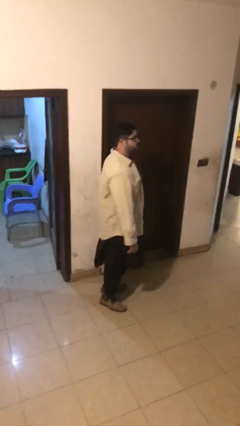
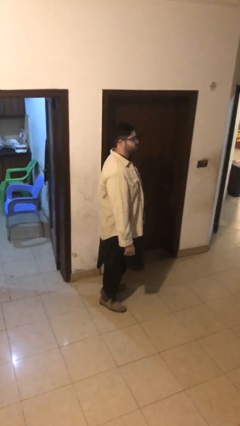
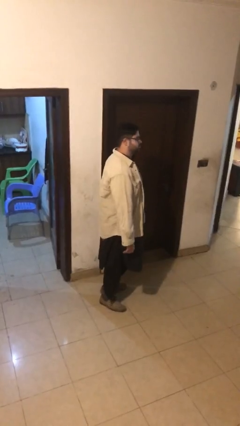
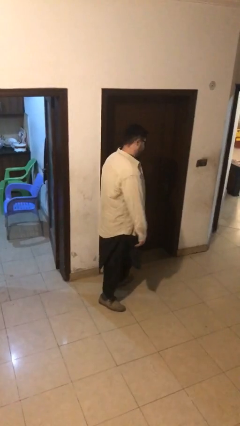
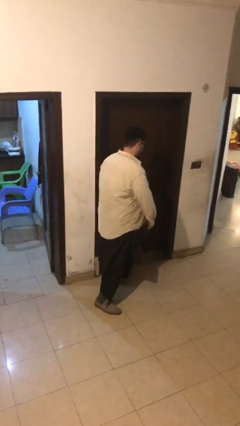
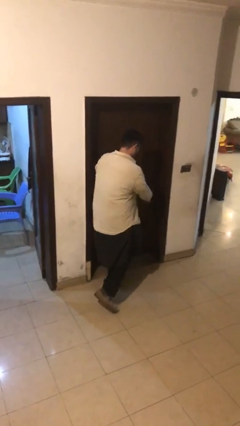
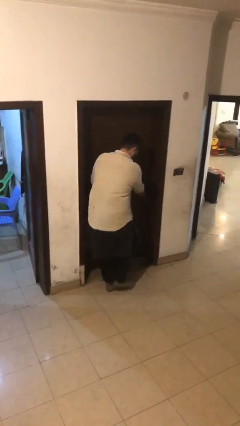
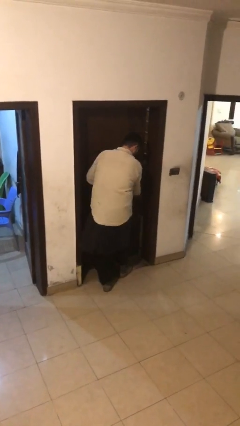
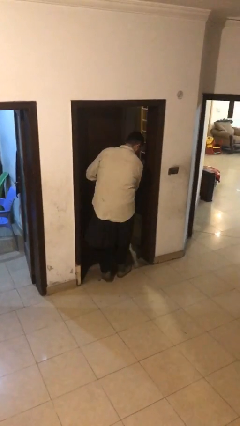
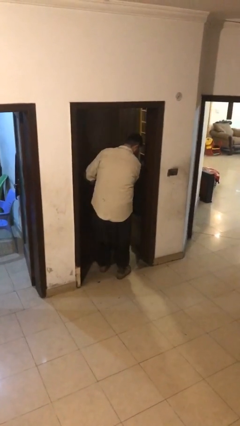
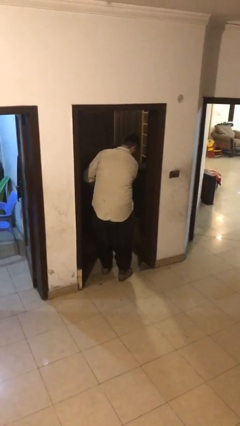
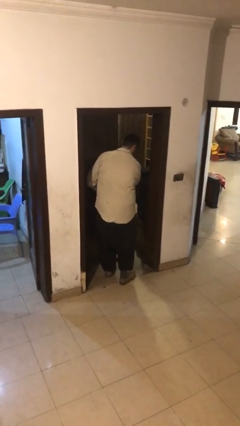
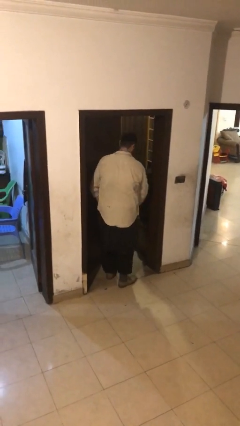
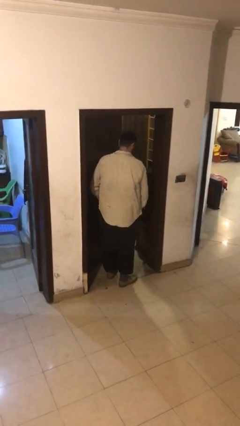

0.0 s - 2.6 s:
person opens facility door

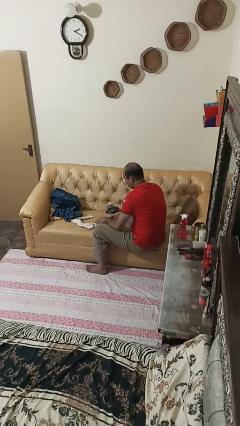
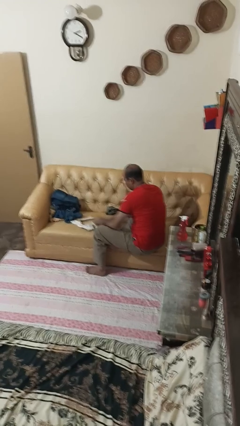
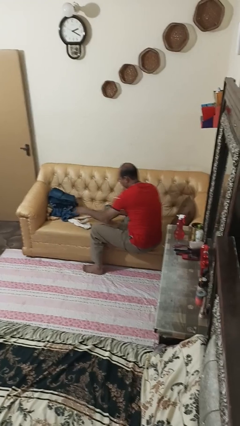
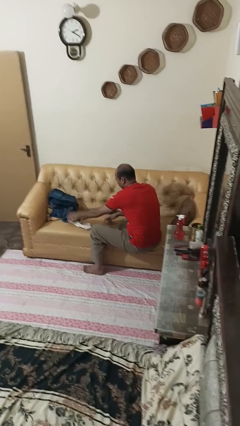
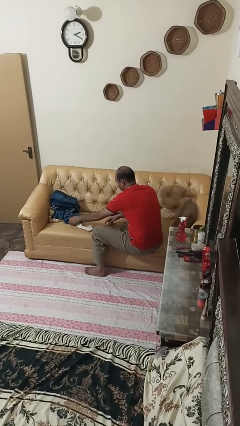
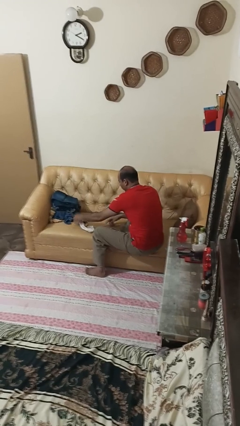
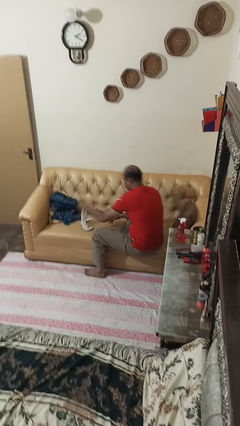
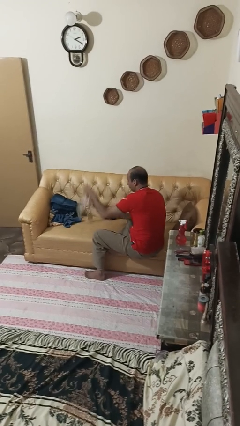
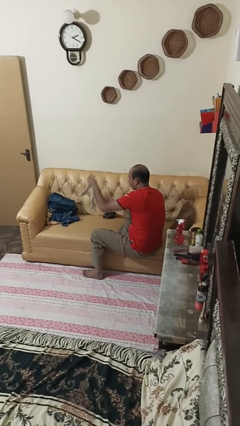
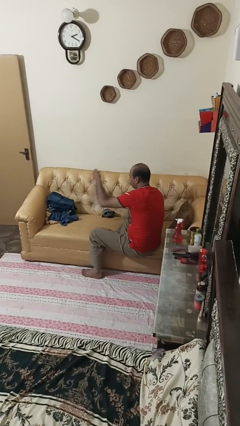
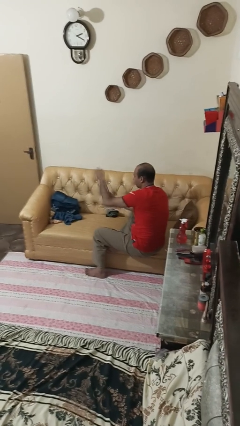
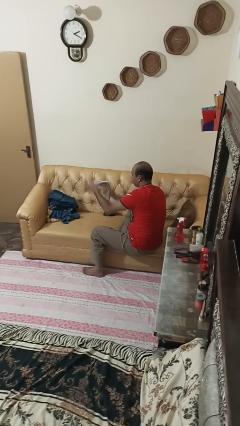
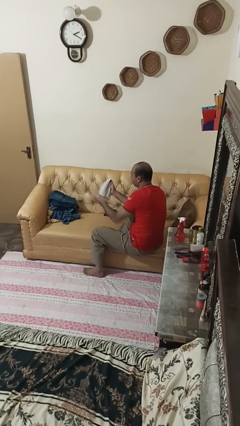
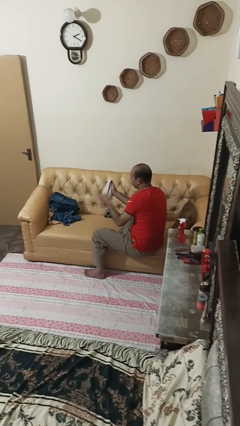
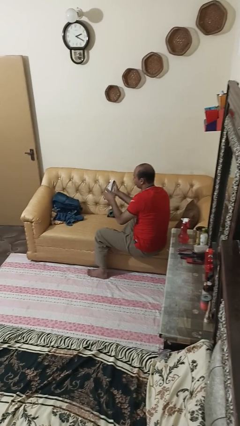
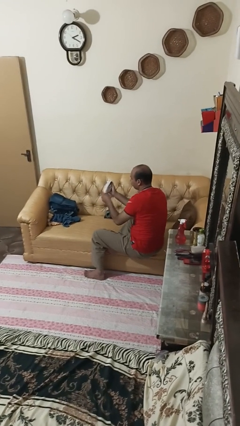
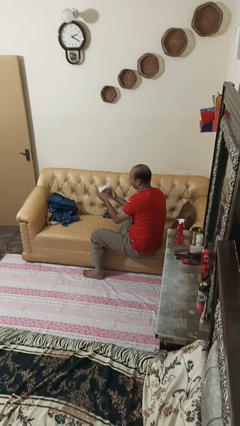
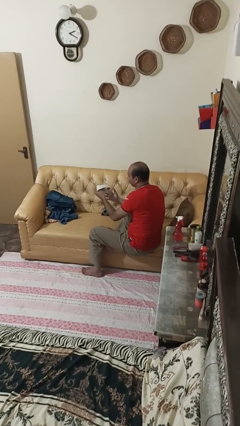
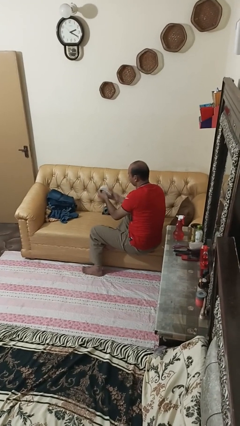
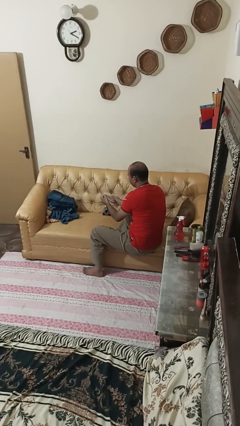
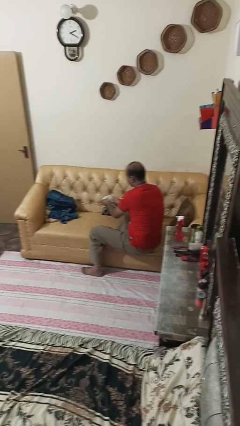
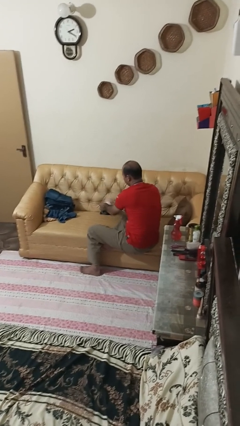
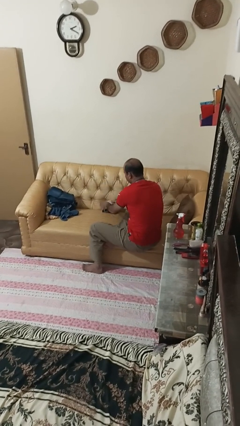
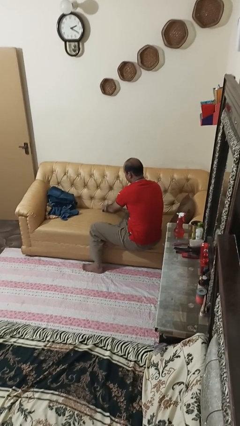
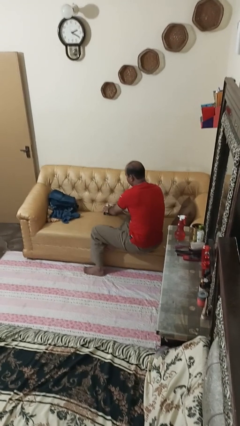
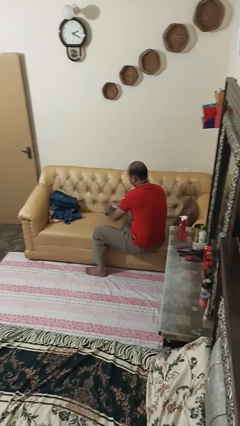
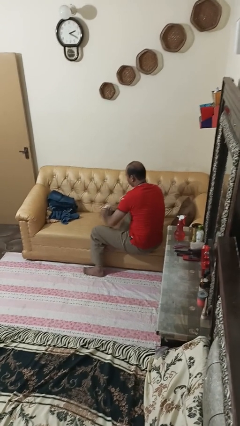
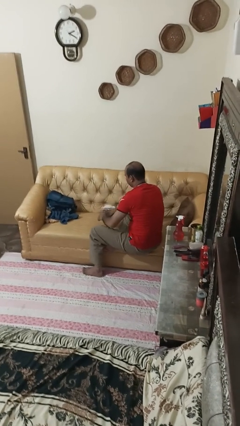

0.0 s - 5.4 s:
person folds socks

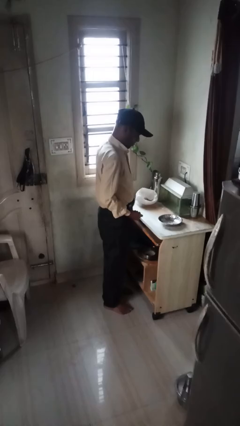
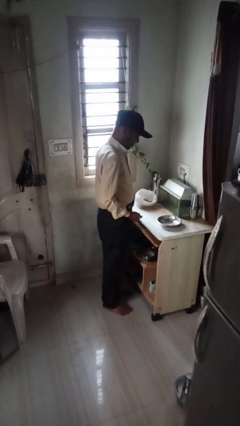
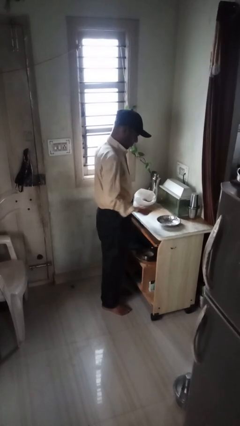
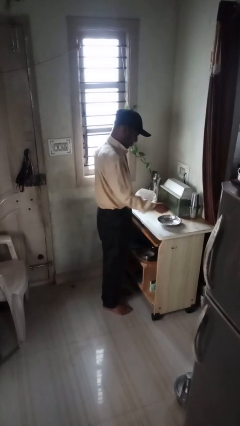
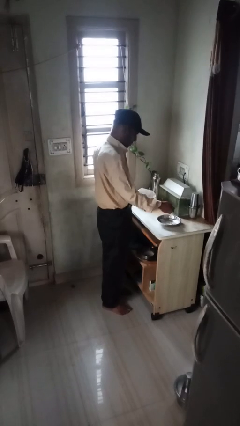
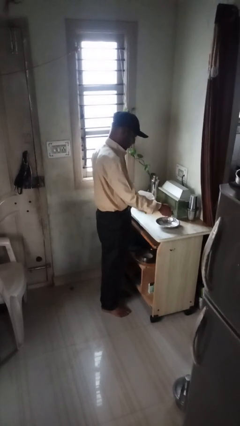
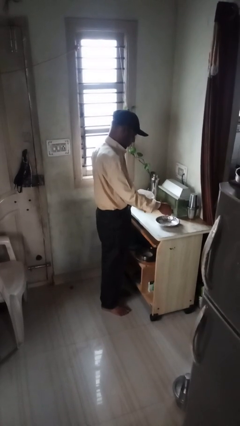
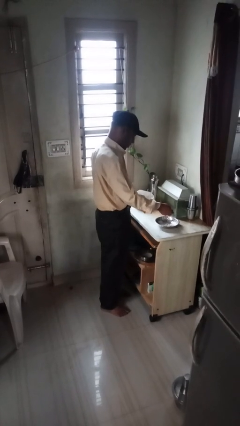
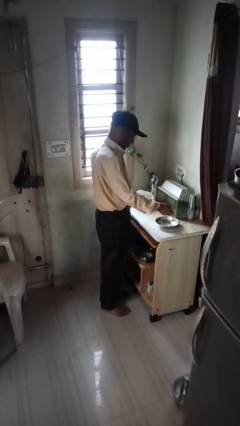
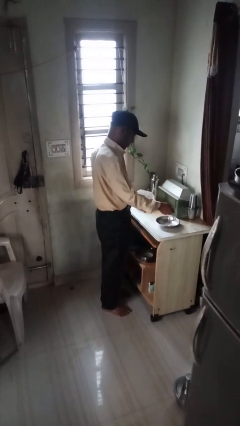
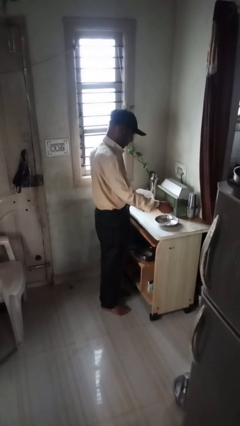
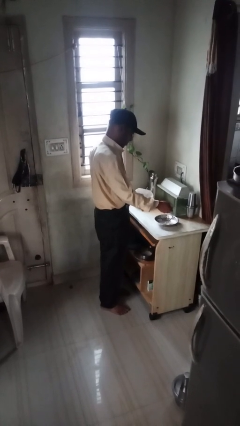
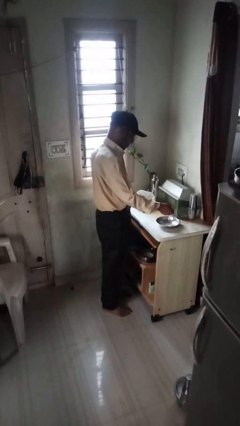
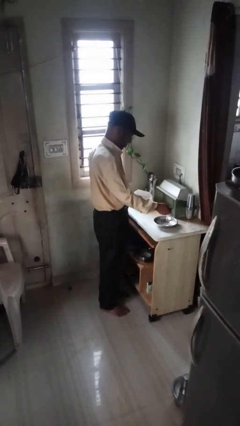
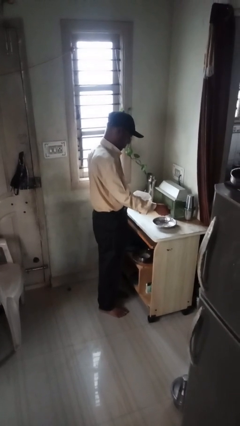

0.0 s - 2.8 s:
person pours into bowl

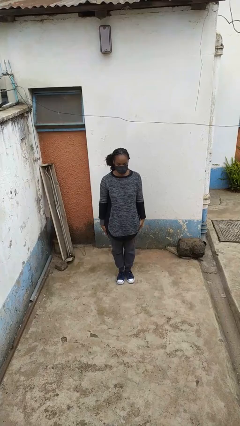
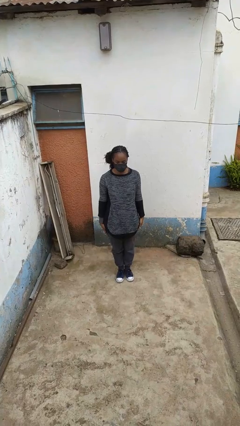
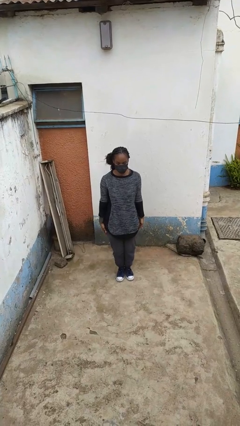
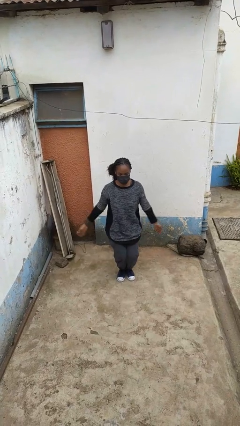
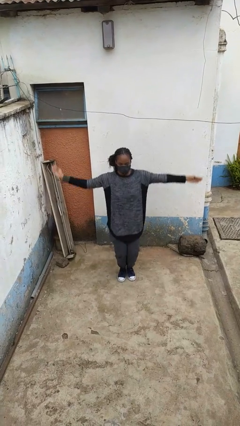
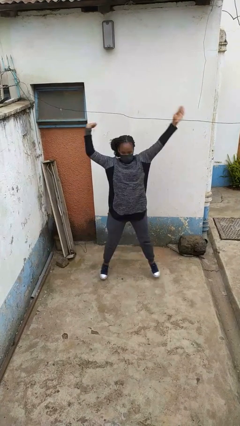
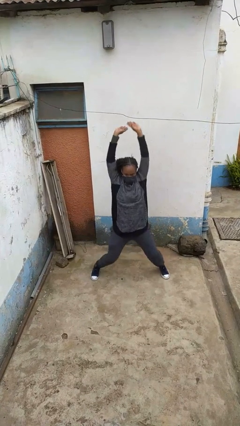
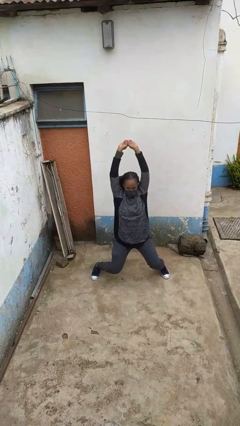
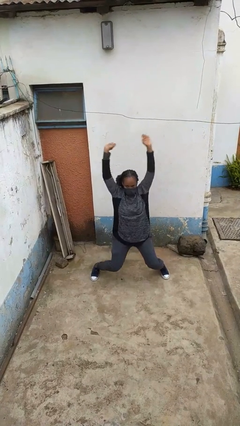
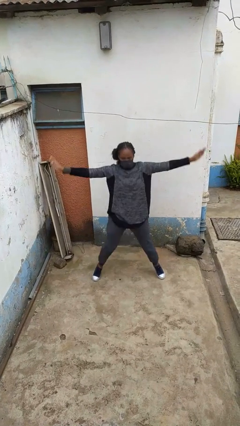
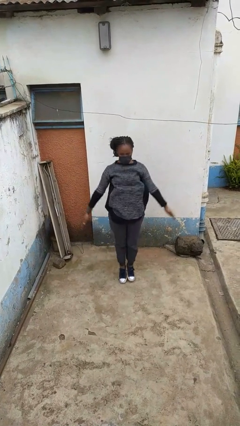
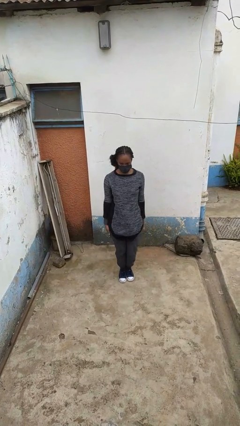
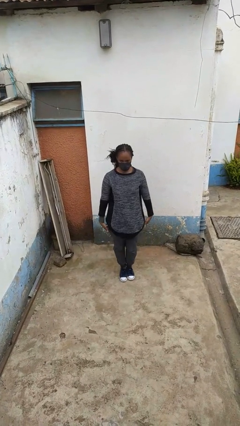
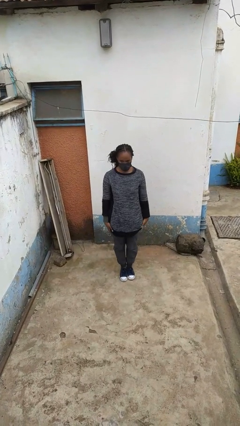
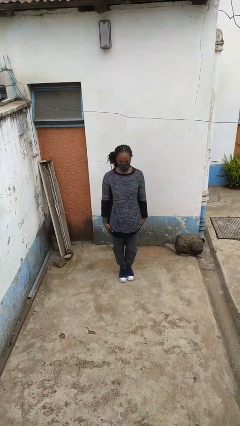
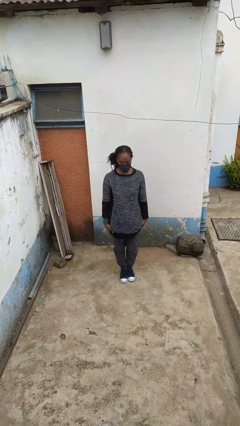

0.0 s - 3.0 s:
person exercises with jumping jacks

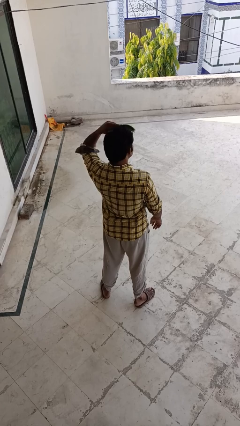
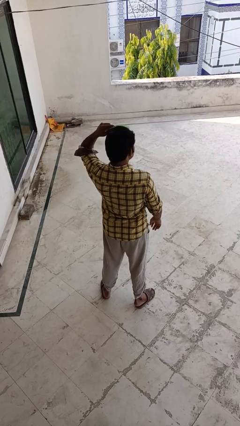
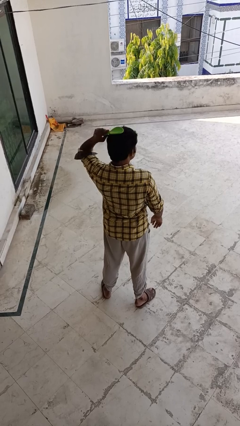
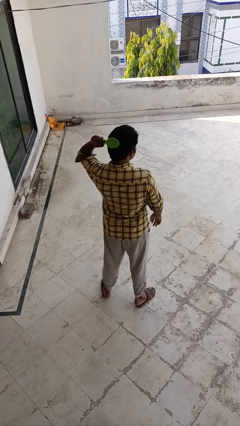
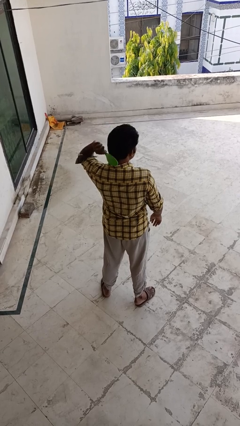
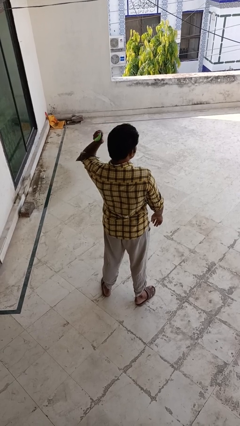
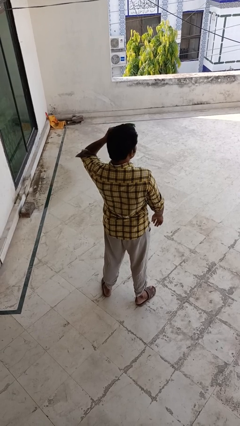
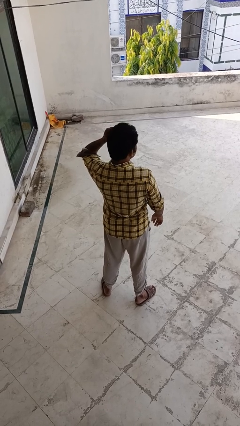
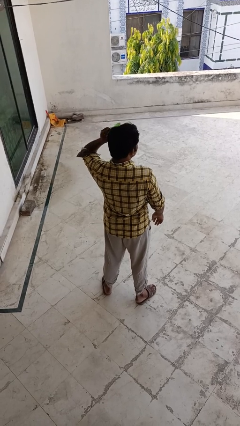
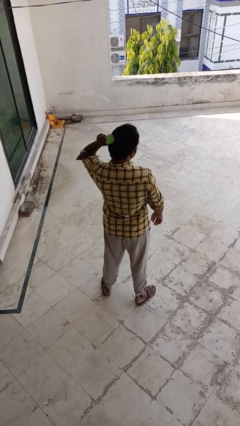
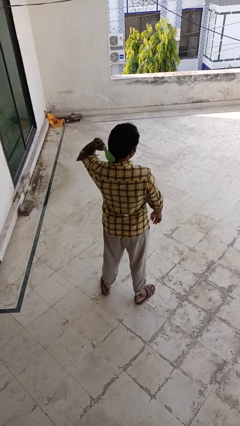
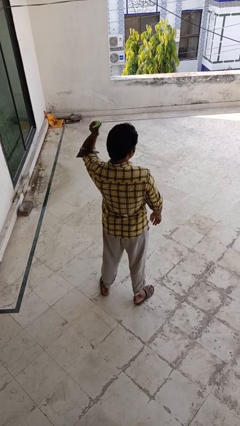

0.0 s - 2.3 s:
person brushes hair

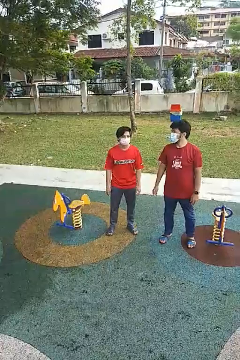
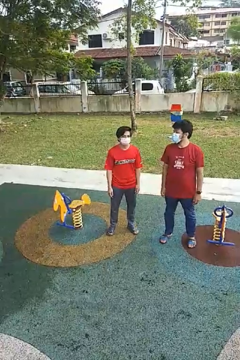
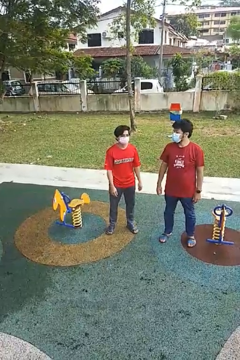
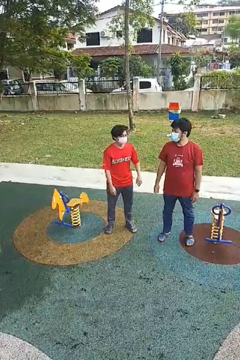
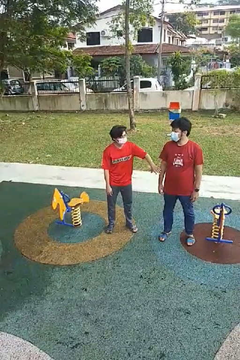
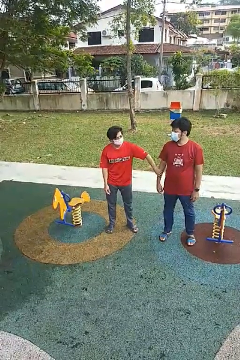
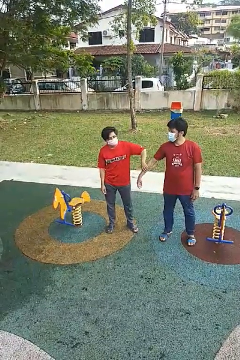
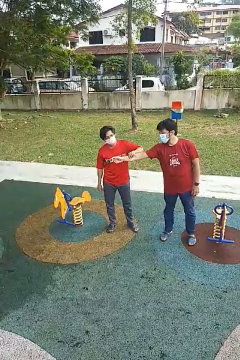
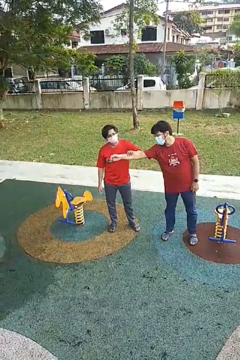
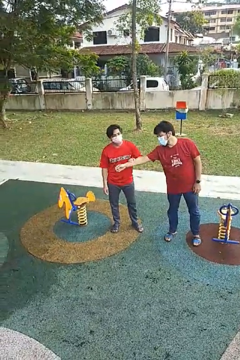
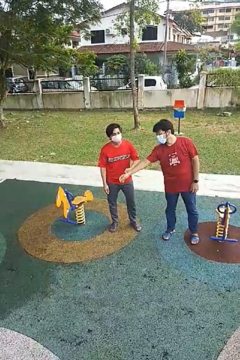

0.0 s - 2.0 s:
person grabs person by forearm
